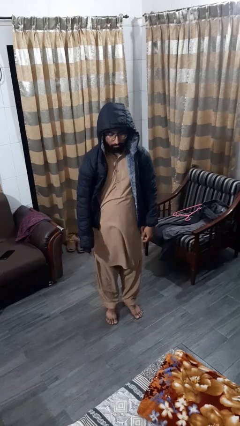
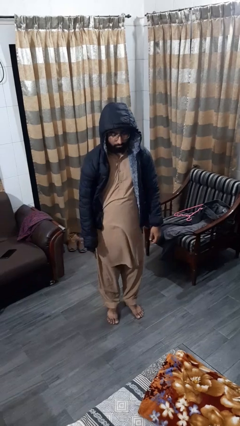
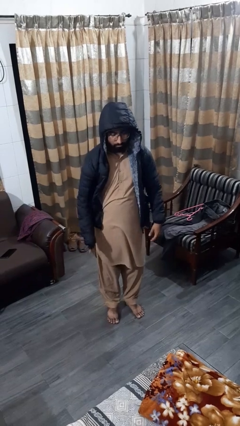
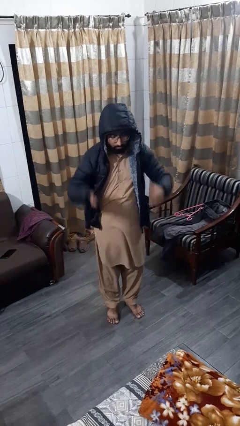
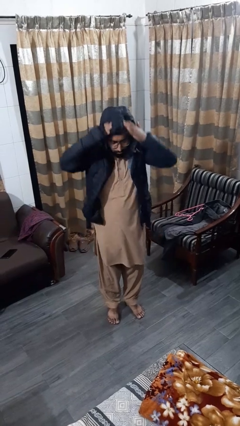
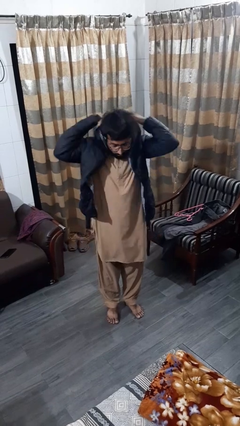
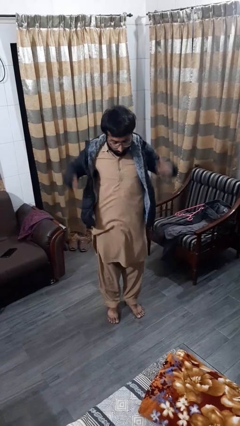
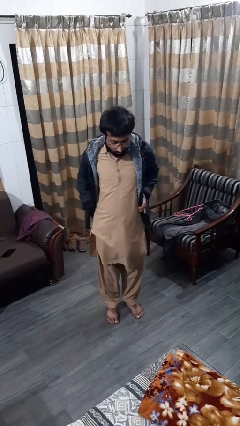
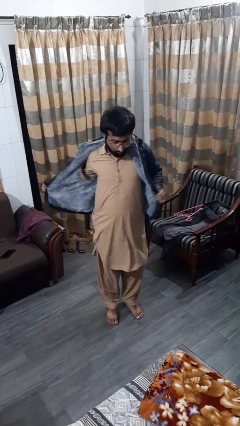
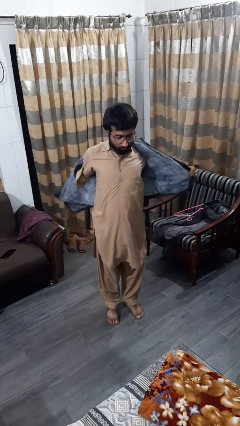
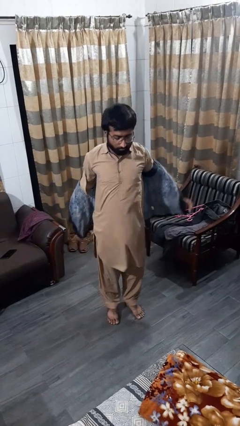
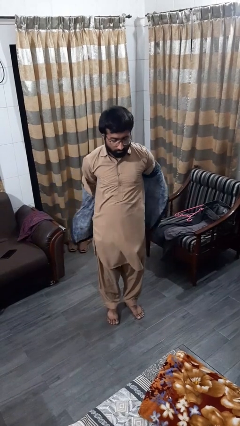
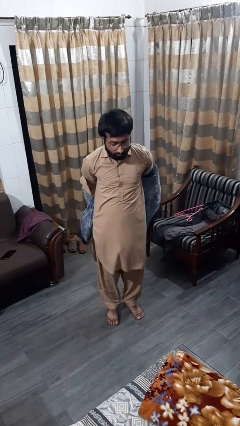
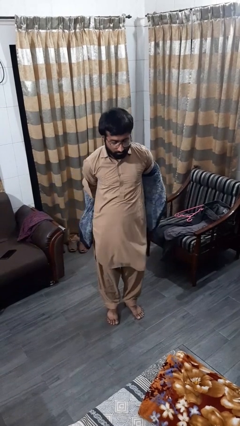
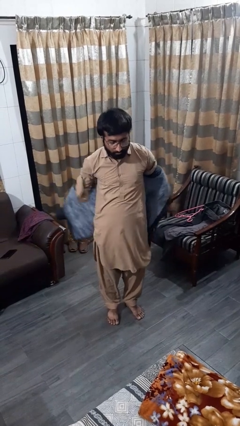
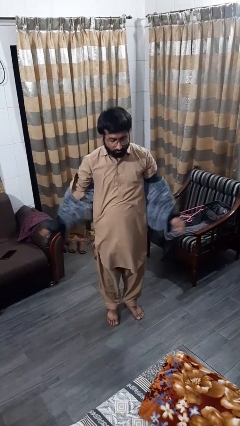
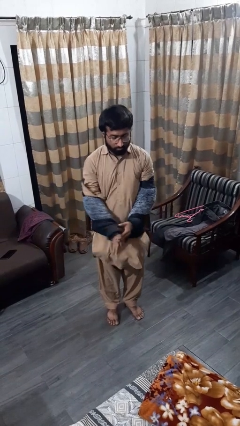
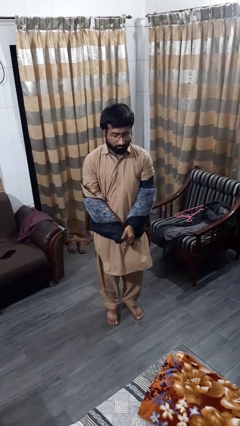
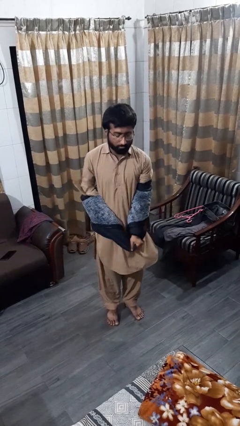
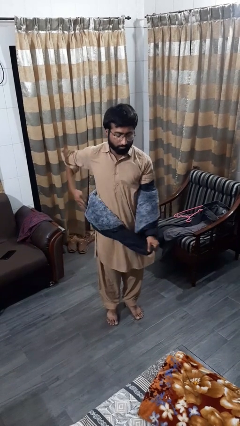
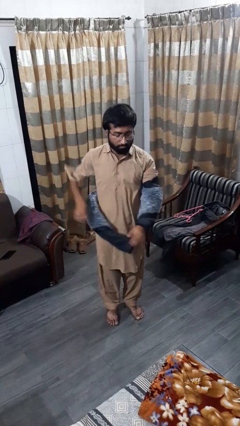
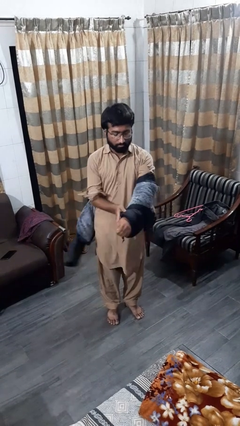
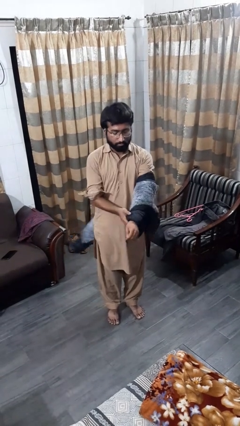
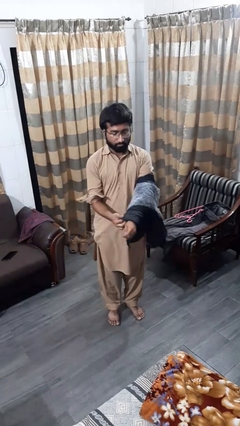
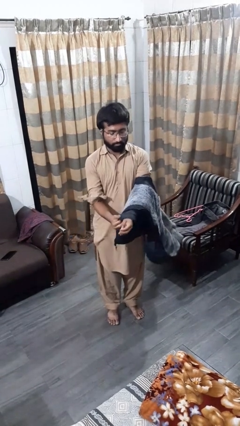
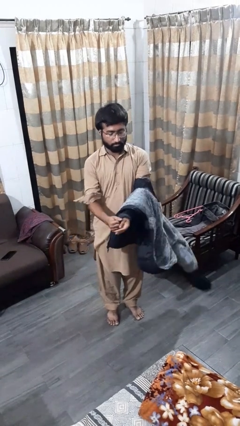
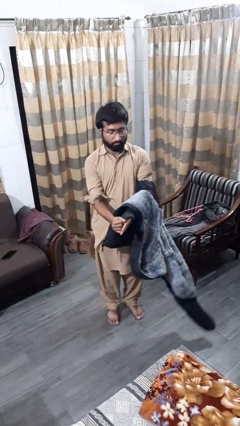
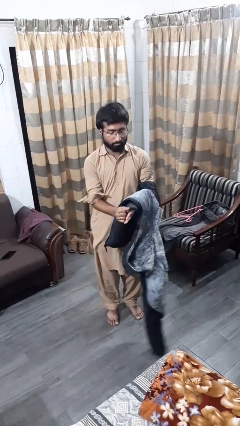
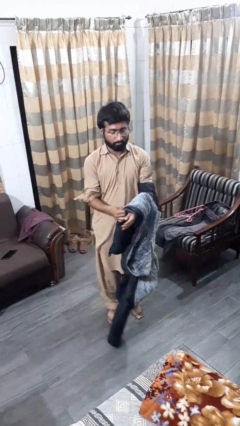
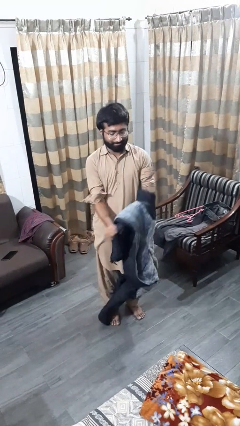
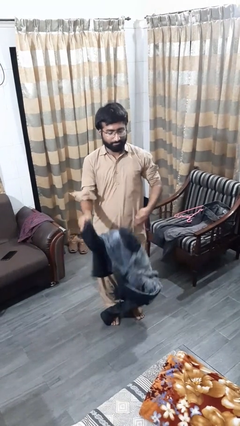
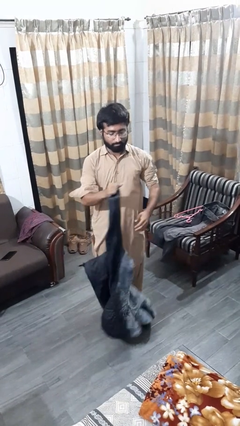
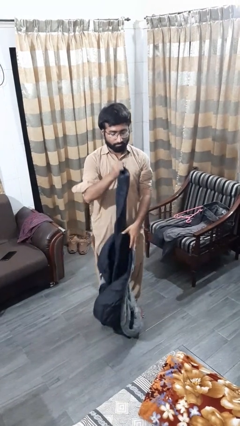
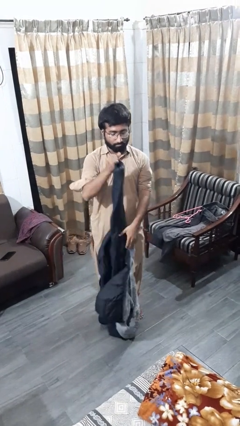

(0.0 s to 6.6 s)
person takes off hoodie

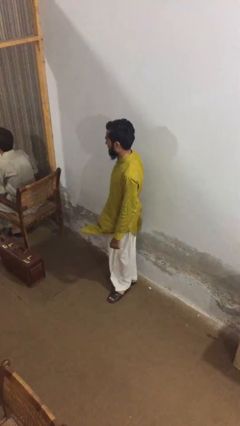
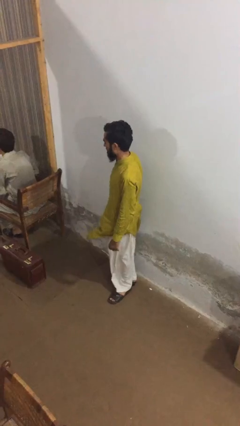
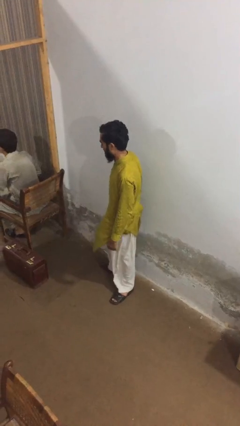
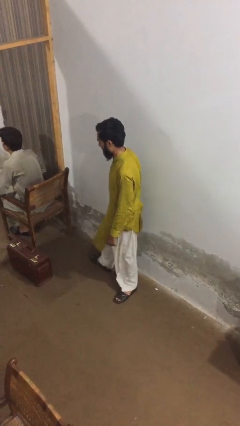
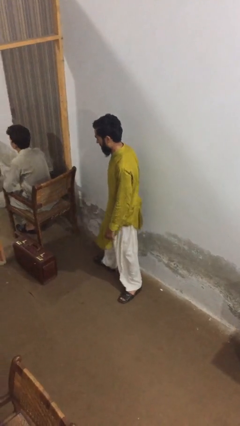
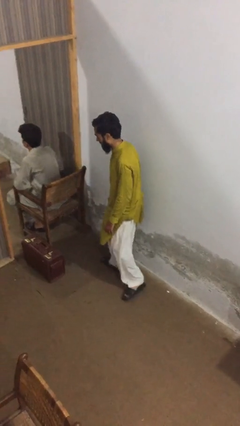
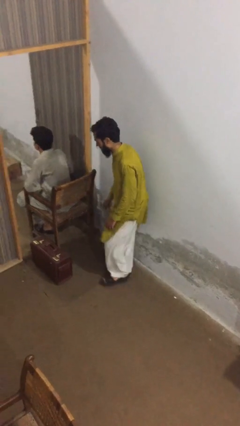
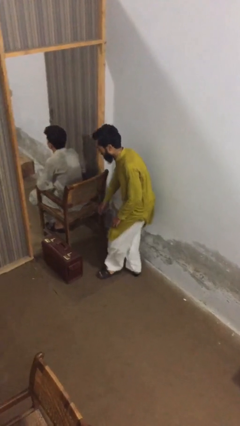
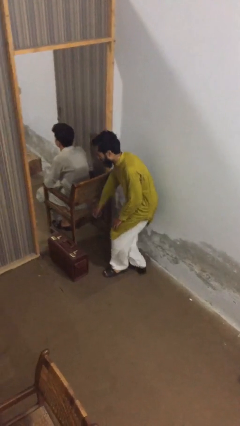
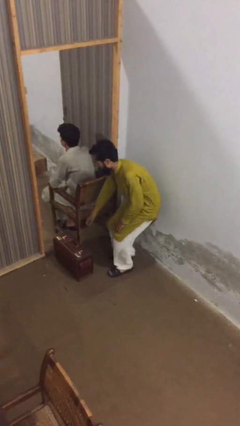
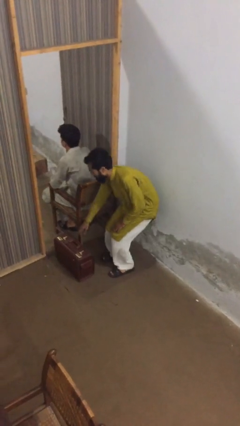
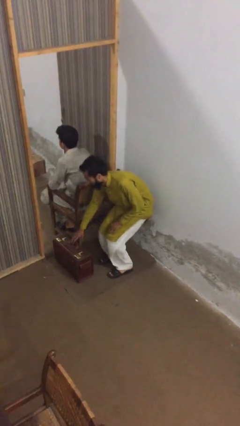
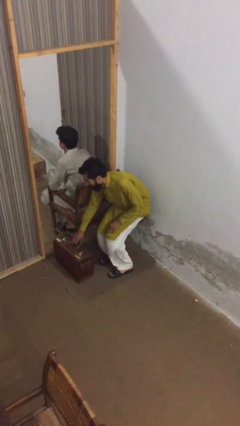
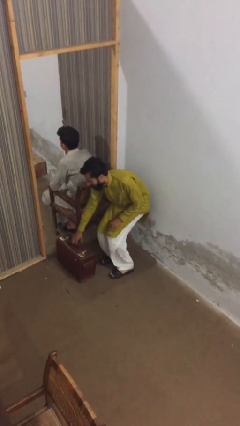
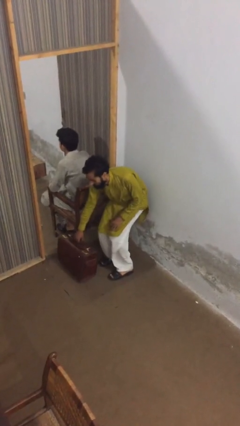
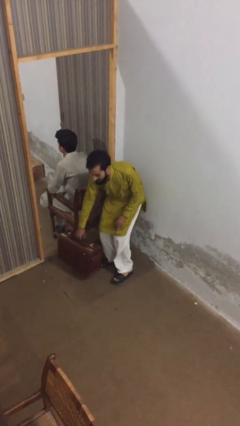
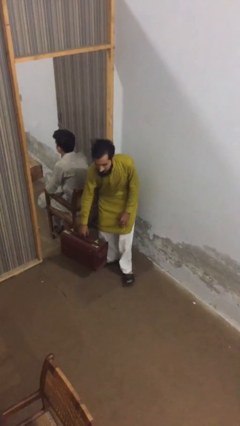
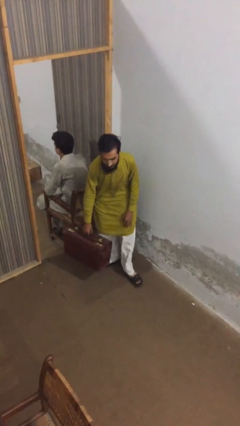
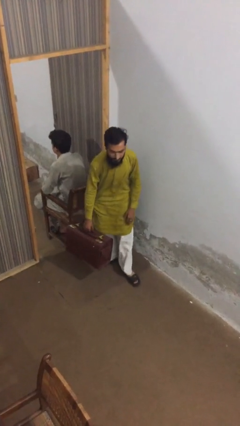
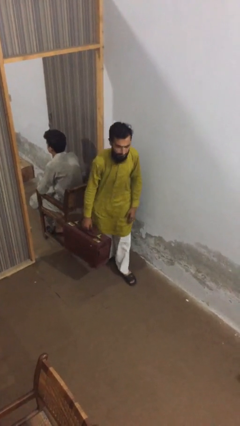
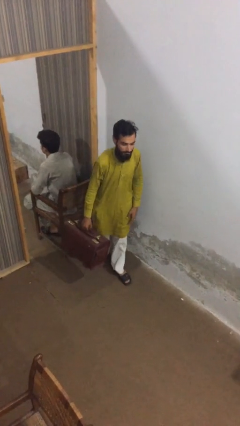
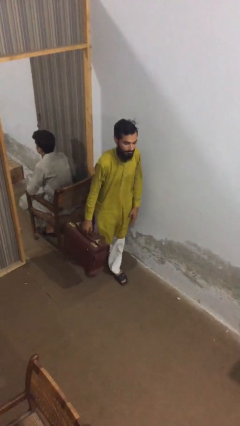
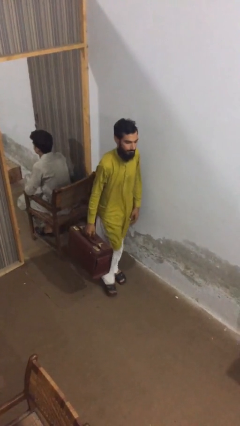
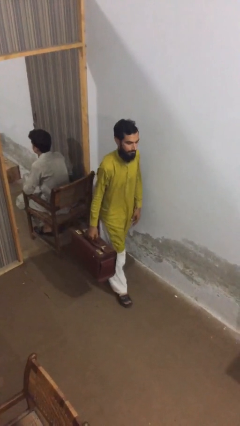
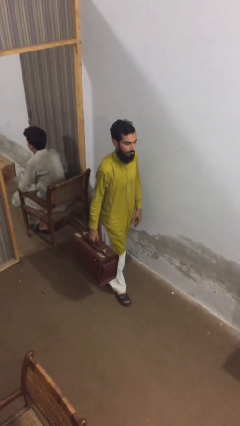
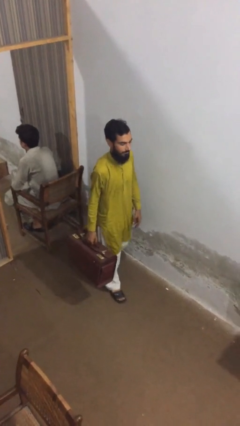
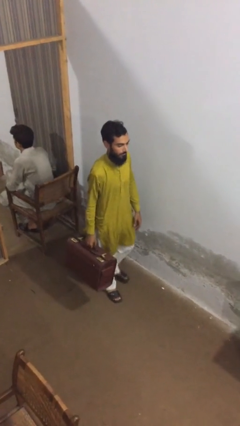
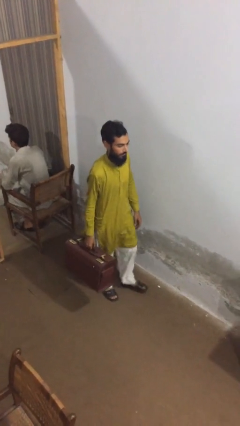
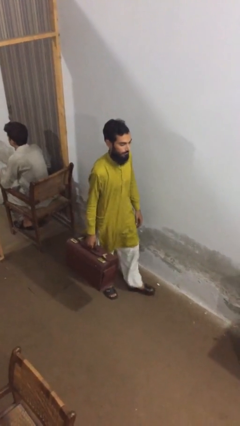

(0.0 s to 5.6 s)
person steals object from person

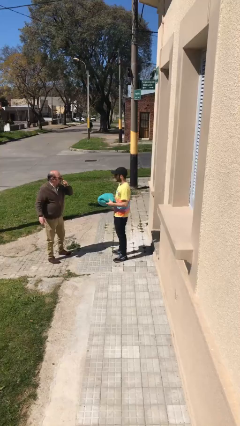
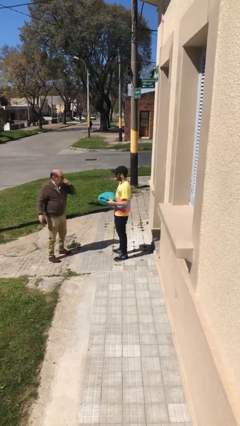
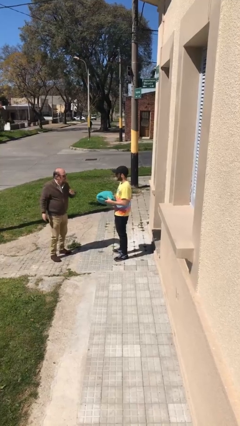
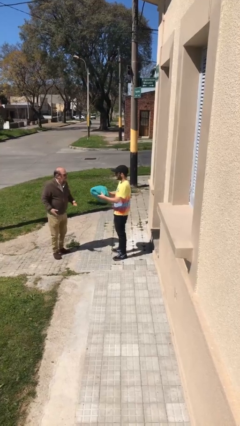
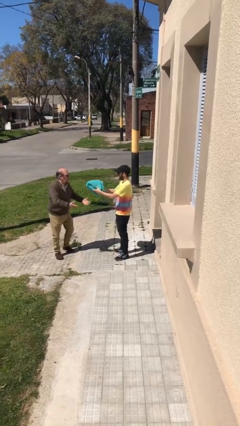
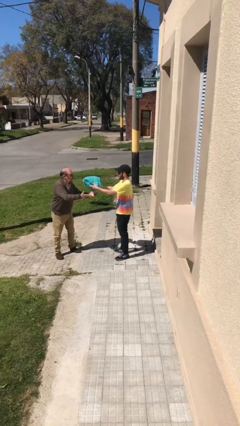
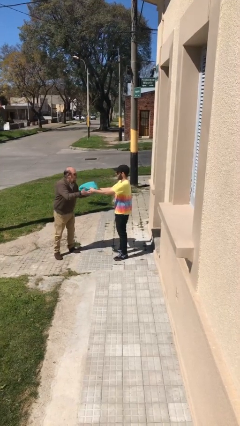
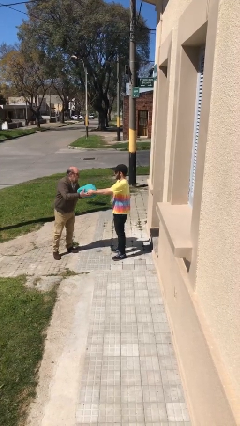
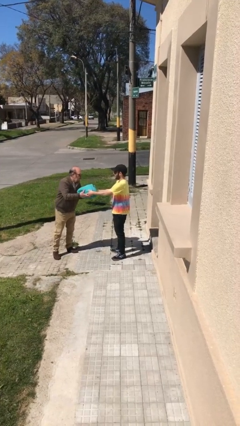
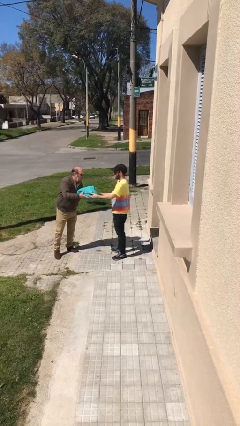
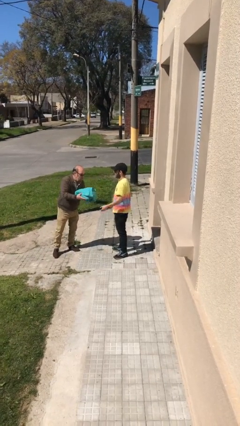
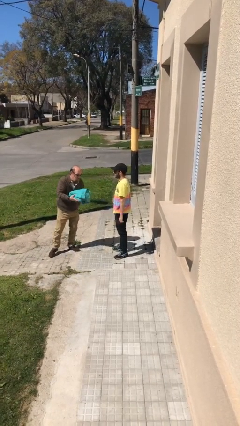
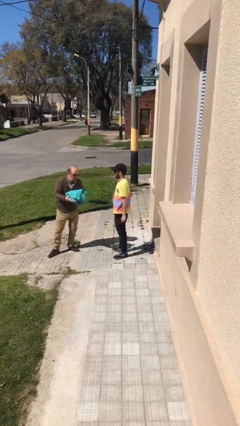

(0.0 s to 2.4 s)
person transfers object to person

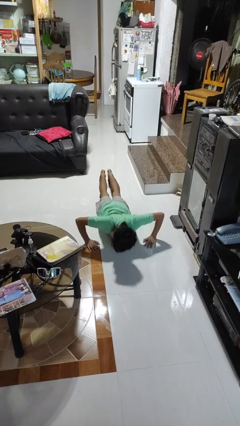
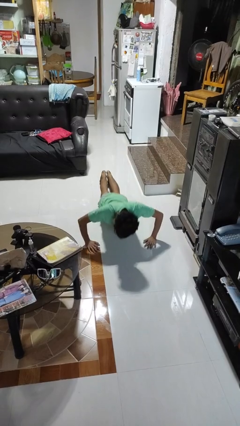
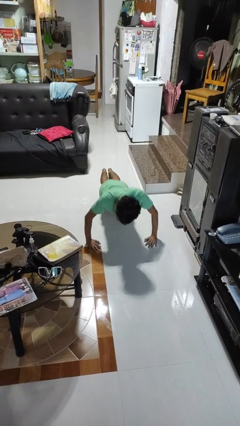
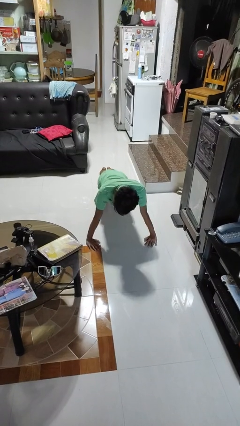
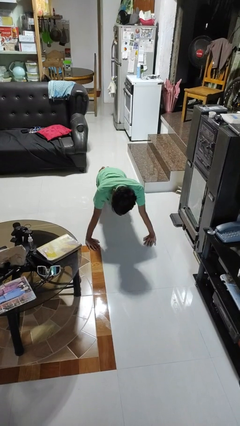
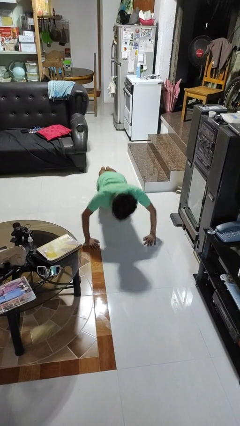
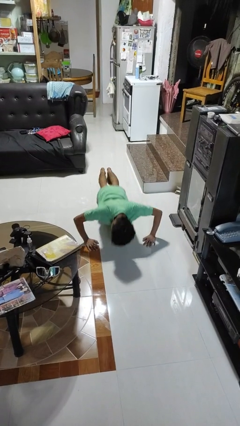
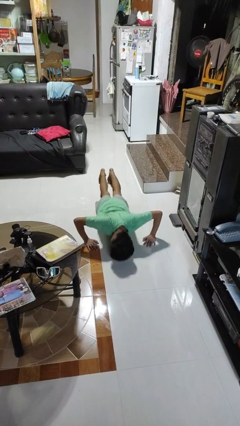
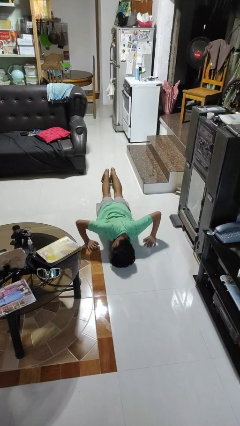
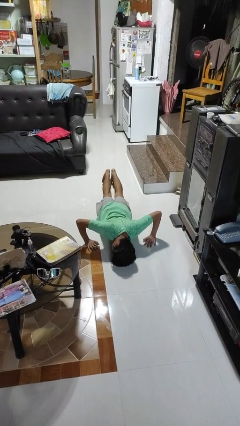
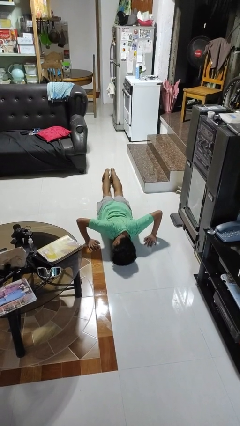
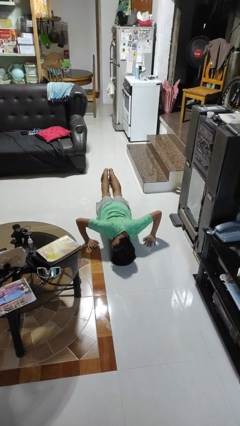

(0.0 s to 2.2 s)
person exercises with pushup

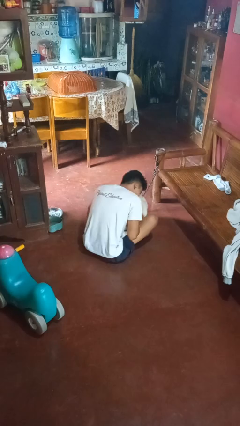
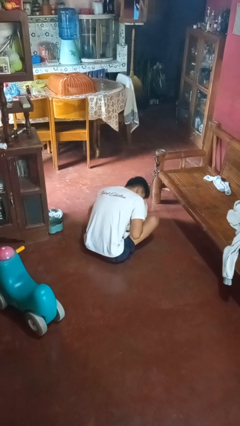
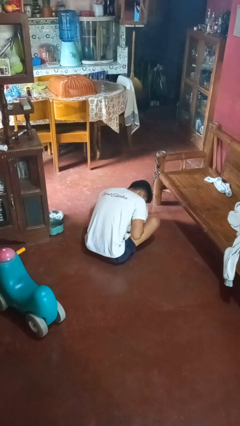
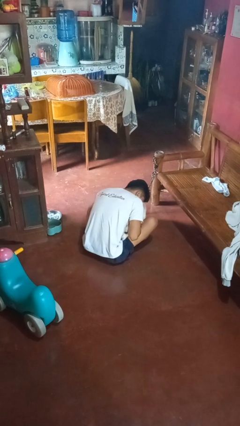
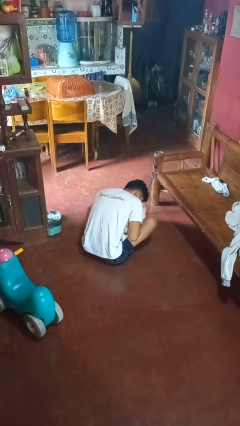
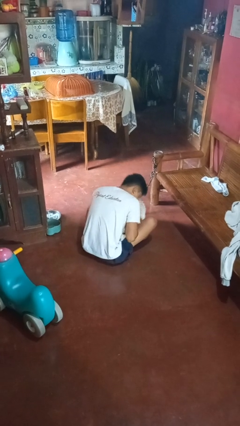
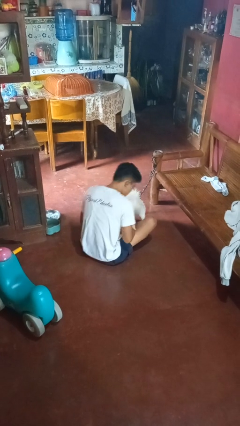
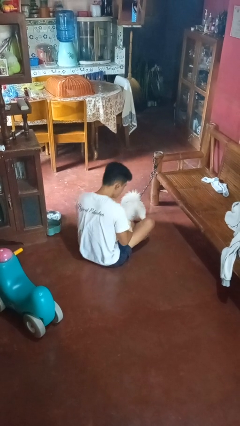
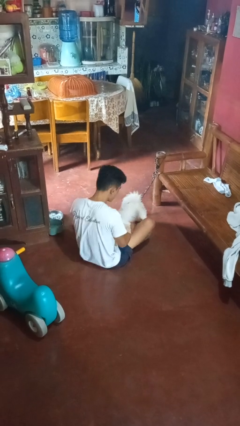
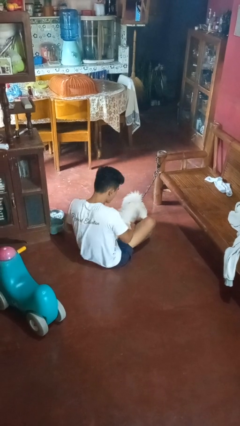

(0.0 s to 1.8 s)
person hugs dog
